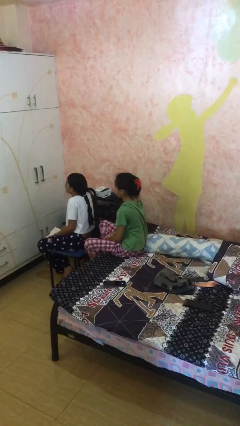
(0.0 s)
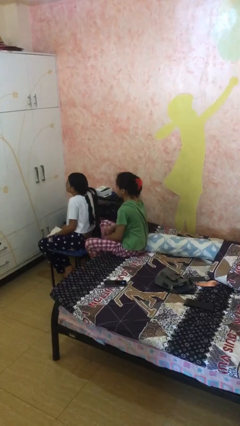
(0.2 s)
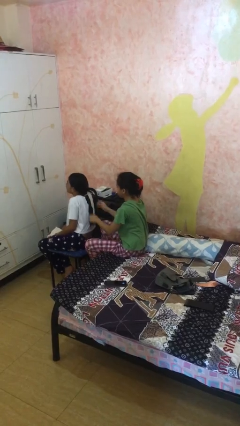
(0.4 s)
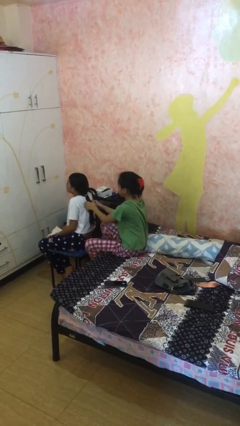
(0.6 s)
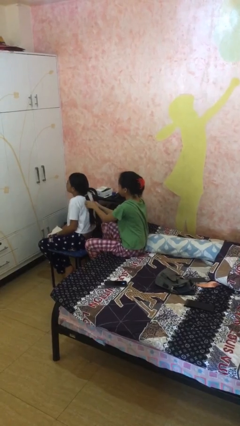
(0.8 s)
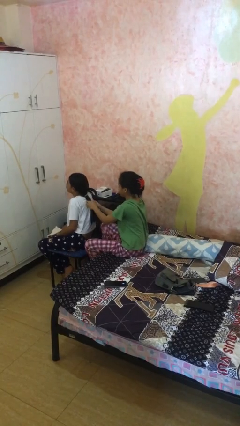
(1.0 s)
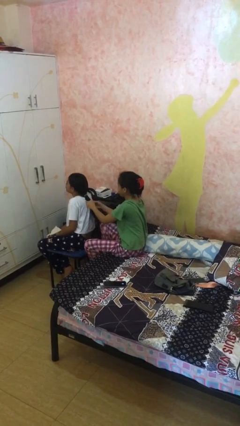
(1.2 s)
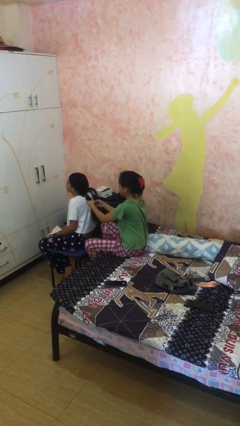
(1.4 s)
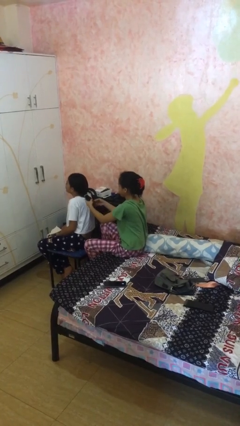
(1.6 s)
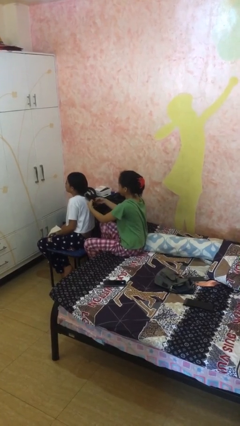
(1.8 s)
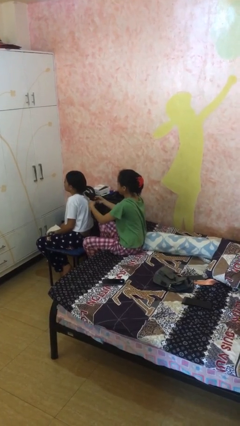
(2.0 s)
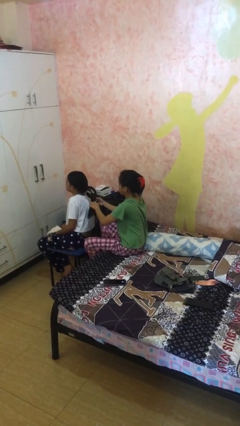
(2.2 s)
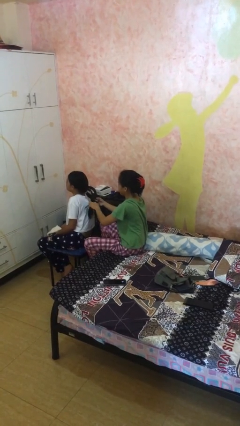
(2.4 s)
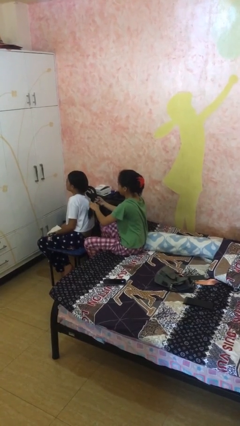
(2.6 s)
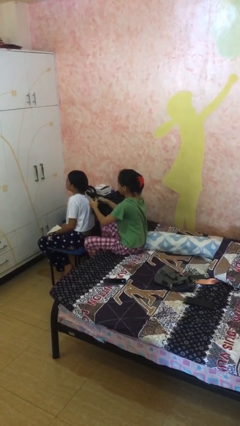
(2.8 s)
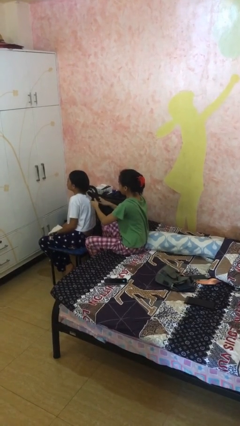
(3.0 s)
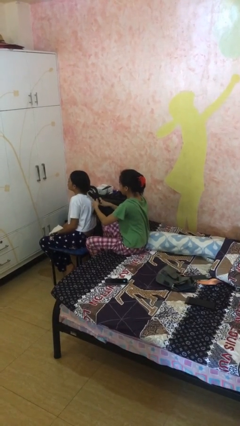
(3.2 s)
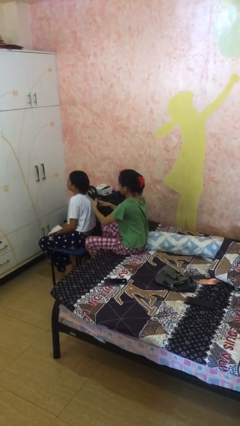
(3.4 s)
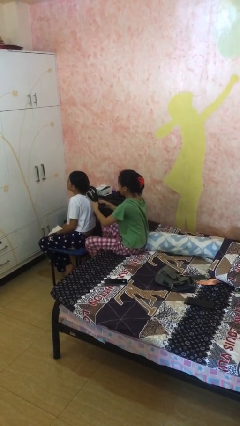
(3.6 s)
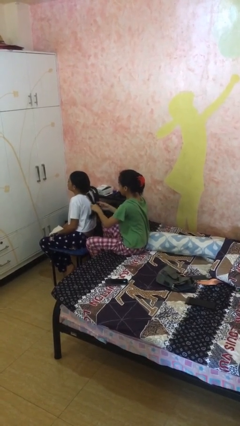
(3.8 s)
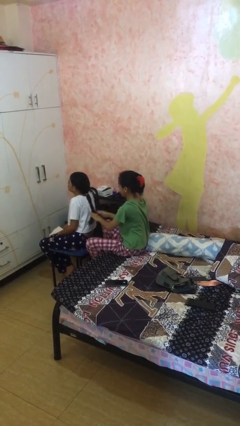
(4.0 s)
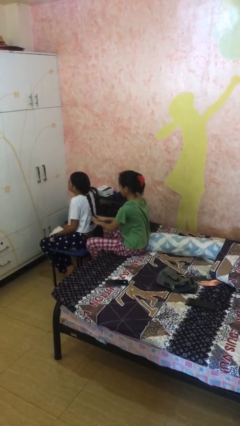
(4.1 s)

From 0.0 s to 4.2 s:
person braids hair of person

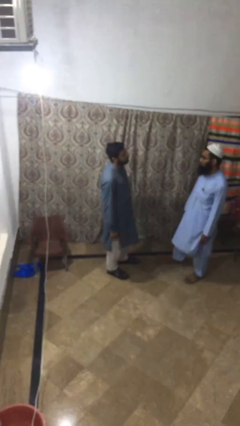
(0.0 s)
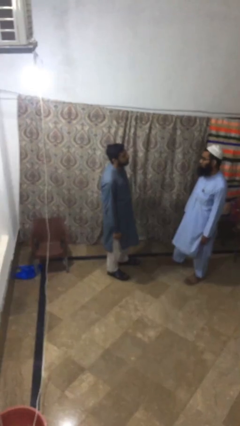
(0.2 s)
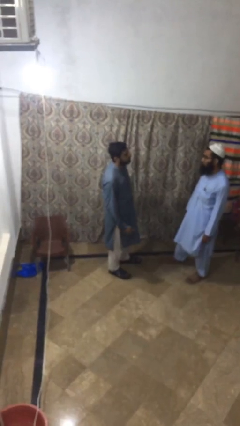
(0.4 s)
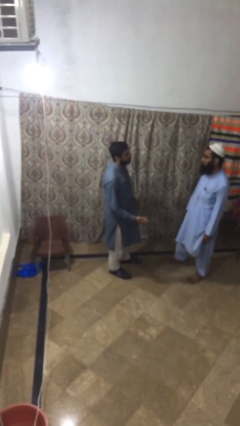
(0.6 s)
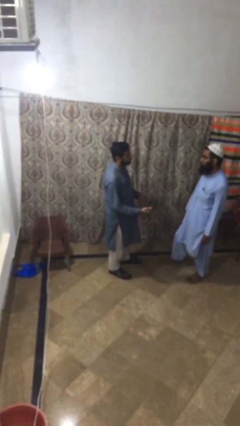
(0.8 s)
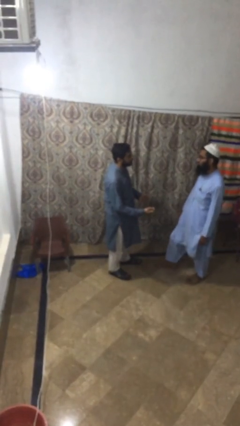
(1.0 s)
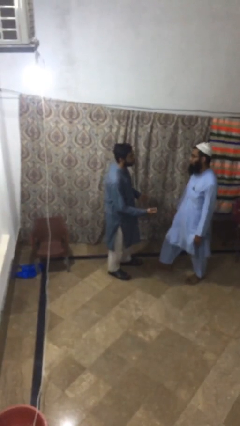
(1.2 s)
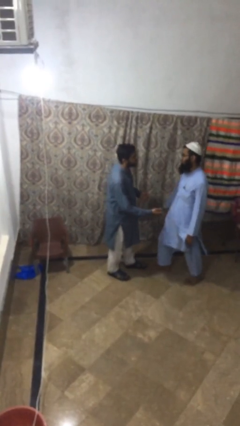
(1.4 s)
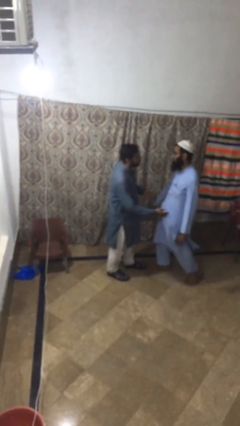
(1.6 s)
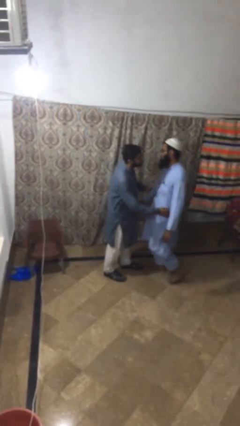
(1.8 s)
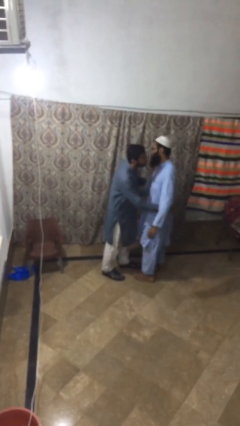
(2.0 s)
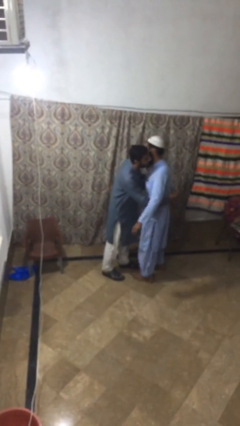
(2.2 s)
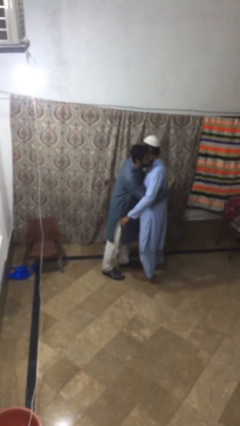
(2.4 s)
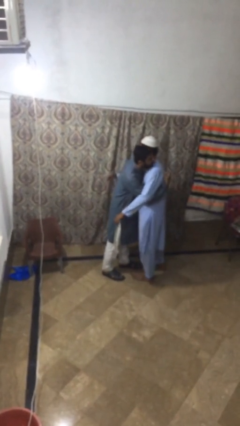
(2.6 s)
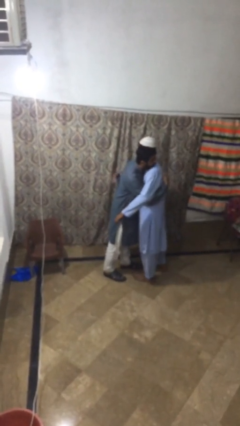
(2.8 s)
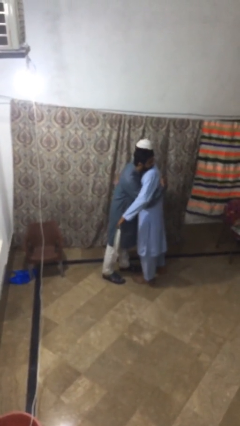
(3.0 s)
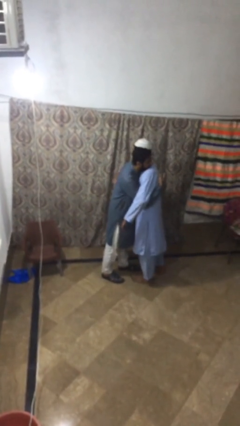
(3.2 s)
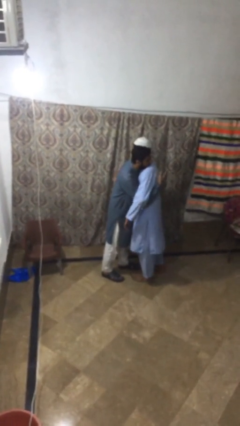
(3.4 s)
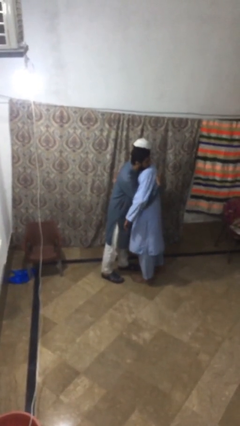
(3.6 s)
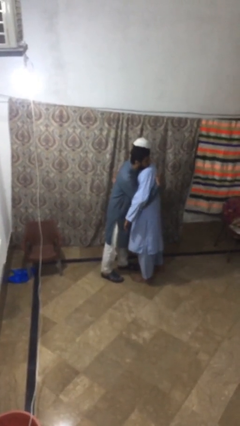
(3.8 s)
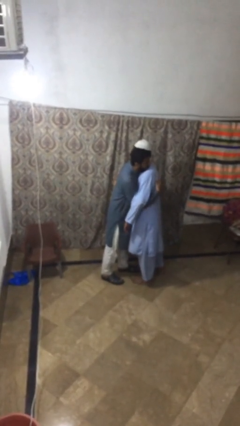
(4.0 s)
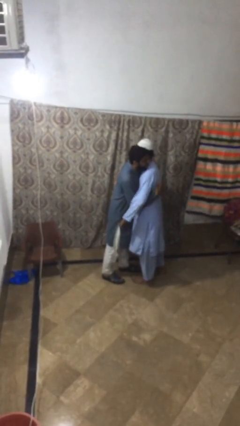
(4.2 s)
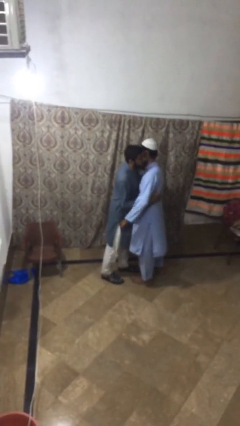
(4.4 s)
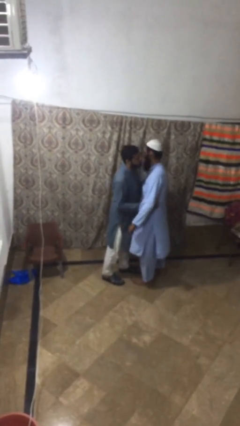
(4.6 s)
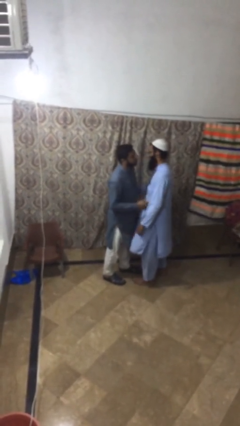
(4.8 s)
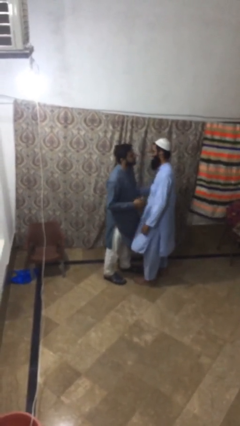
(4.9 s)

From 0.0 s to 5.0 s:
person embraces person

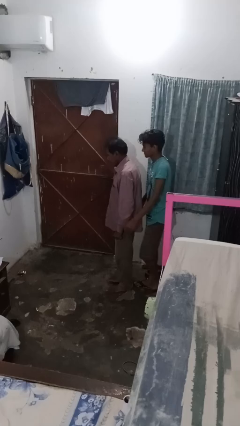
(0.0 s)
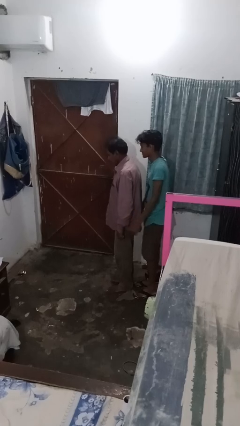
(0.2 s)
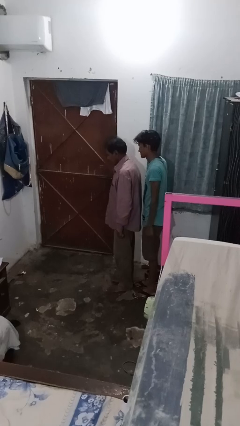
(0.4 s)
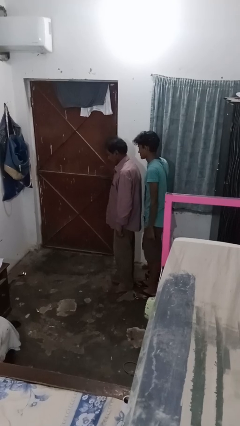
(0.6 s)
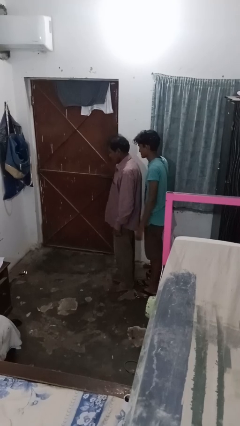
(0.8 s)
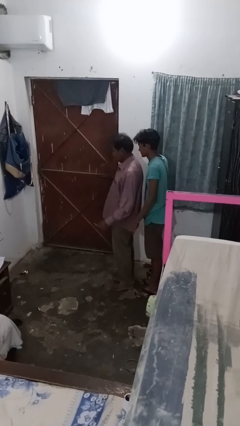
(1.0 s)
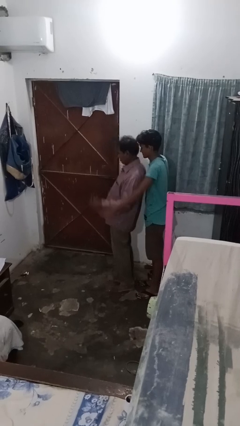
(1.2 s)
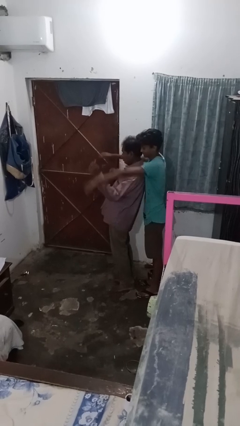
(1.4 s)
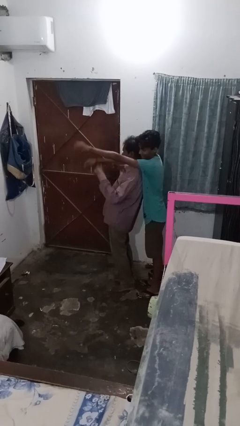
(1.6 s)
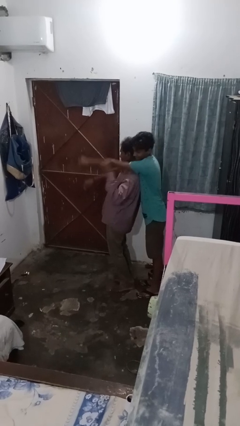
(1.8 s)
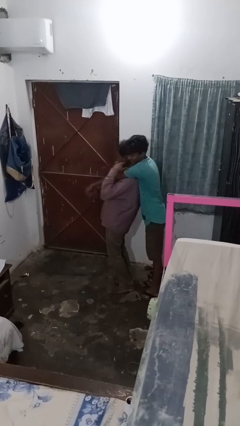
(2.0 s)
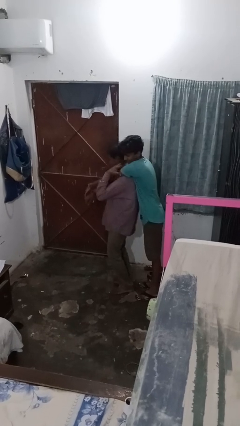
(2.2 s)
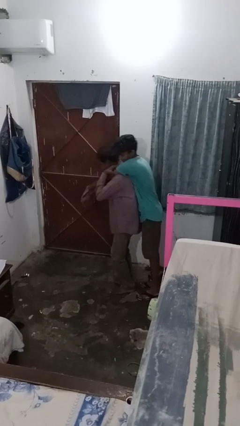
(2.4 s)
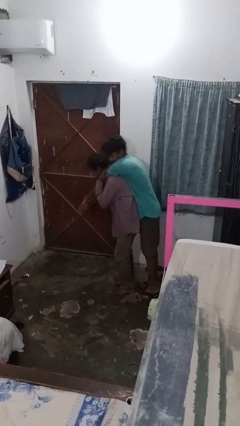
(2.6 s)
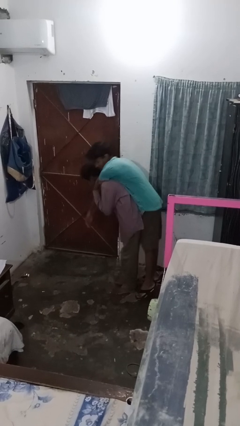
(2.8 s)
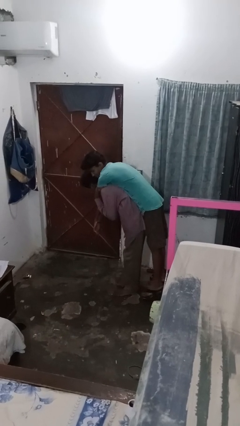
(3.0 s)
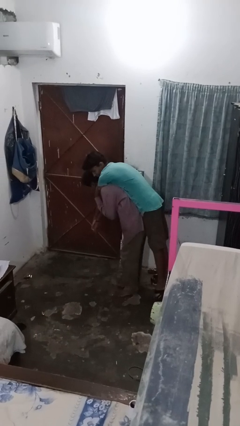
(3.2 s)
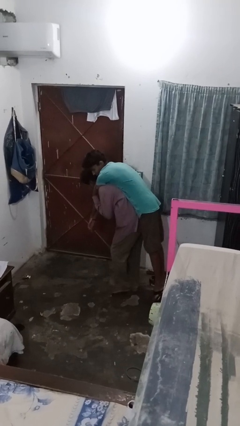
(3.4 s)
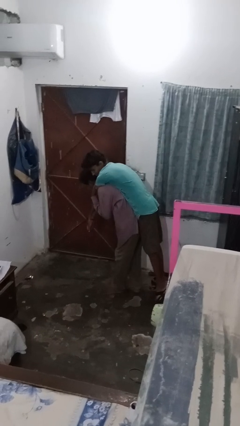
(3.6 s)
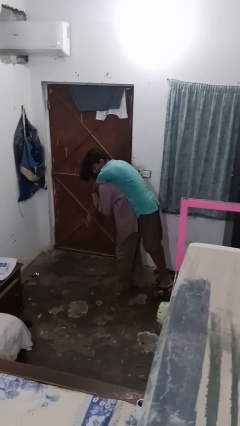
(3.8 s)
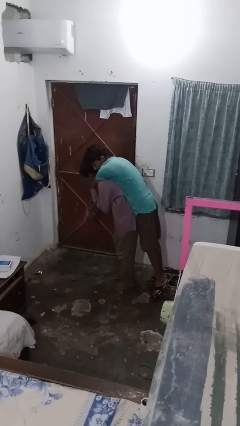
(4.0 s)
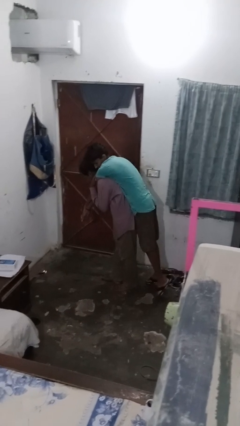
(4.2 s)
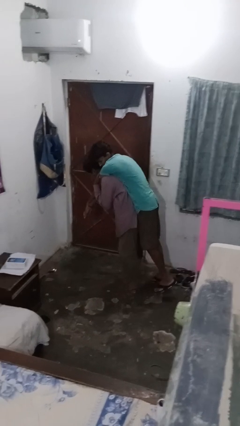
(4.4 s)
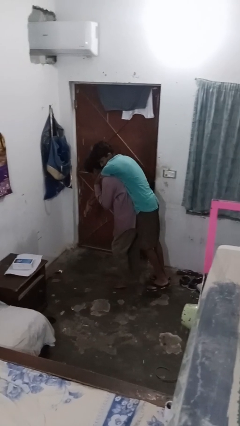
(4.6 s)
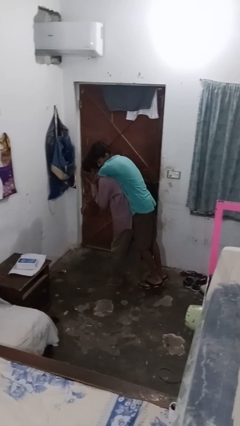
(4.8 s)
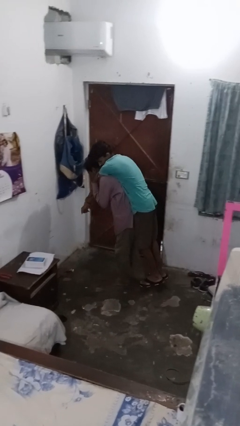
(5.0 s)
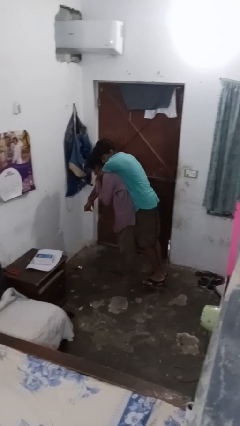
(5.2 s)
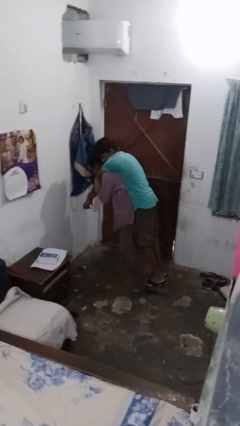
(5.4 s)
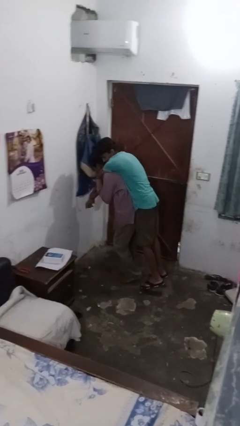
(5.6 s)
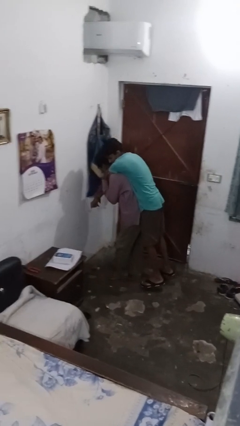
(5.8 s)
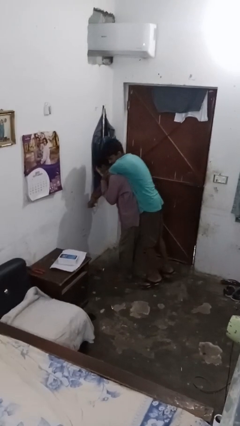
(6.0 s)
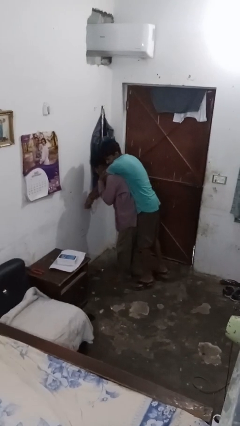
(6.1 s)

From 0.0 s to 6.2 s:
person carries person on back

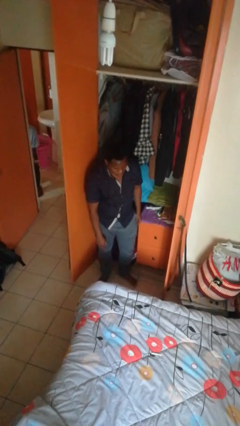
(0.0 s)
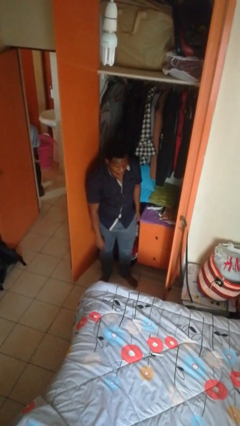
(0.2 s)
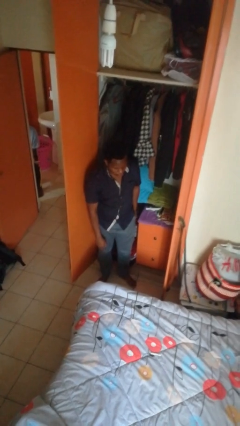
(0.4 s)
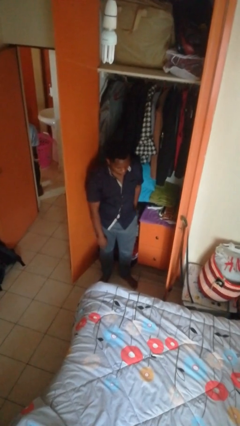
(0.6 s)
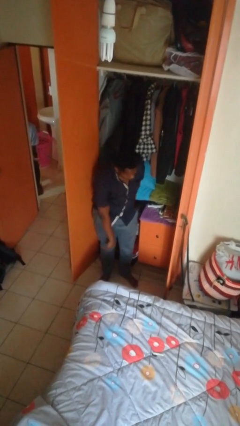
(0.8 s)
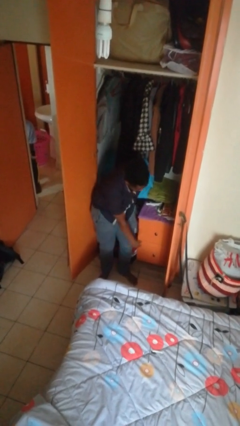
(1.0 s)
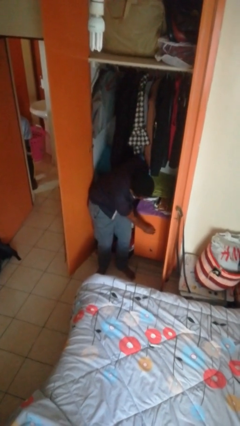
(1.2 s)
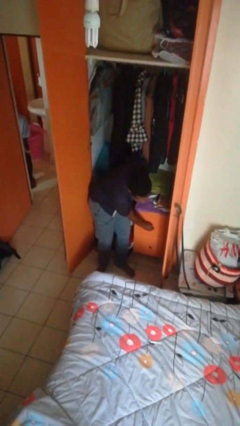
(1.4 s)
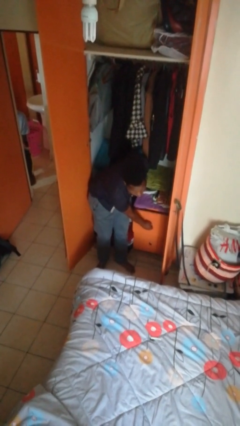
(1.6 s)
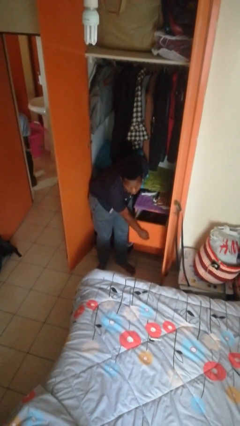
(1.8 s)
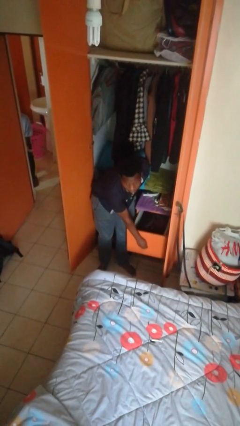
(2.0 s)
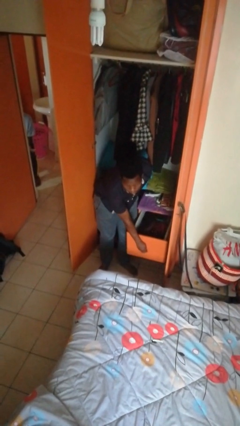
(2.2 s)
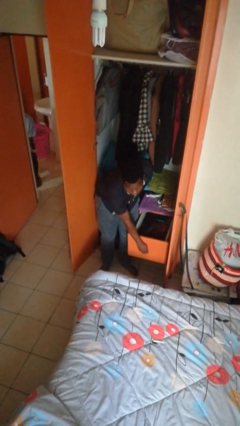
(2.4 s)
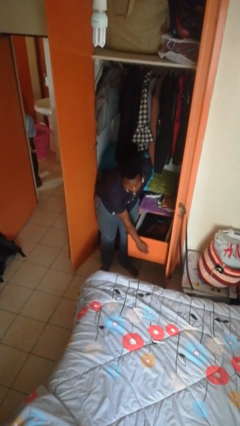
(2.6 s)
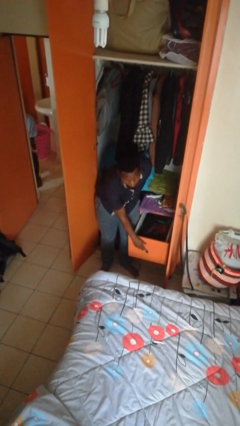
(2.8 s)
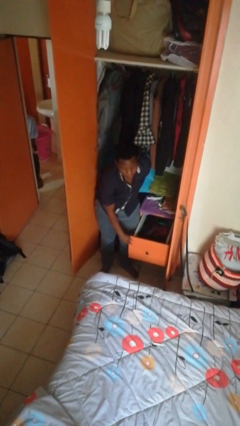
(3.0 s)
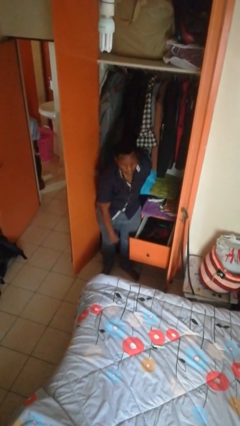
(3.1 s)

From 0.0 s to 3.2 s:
person opens dresser drawer
